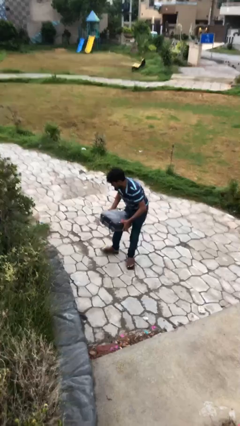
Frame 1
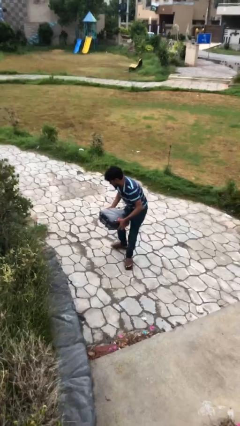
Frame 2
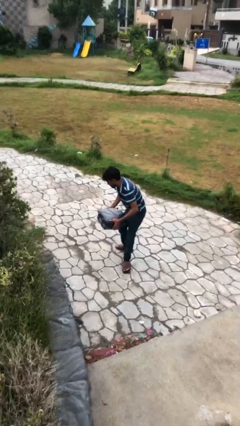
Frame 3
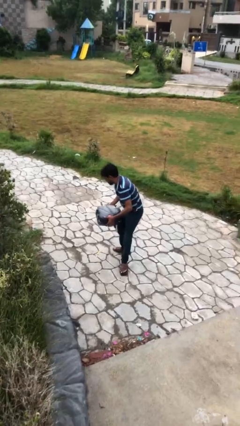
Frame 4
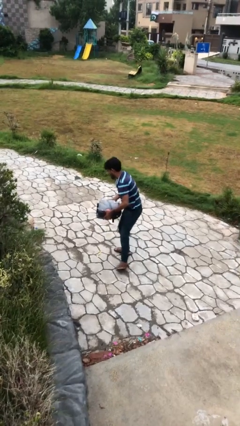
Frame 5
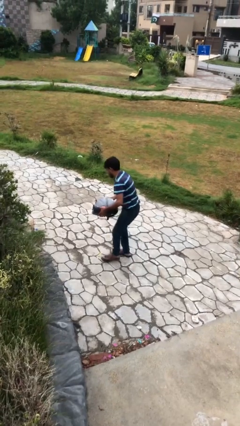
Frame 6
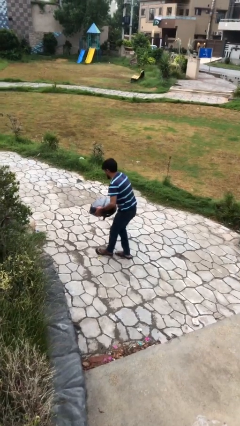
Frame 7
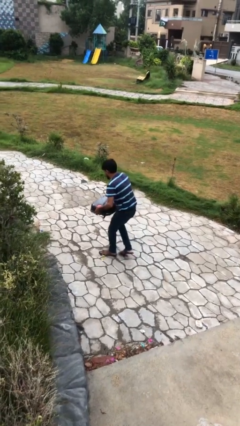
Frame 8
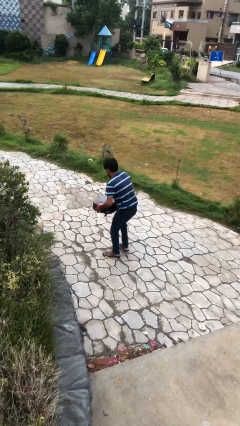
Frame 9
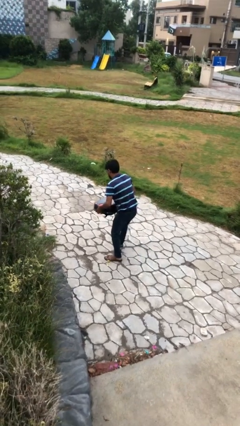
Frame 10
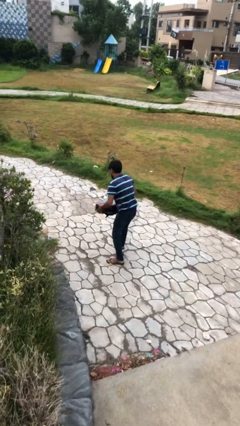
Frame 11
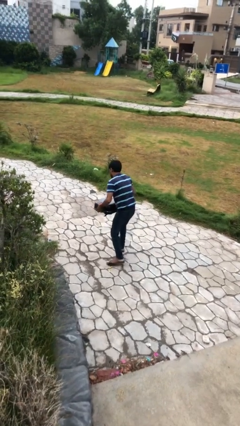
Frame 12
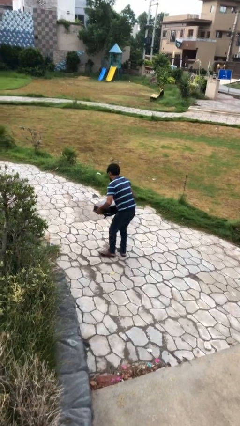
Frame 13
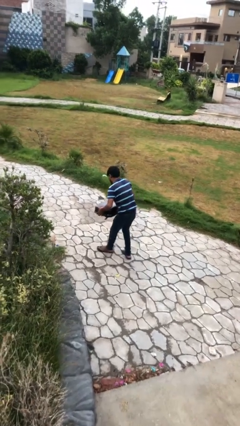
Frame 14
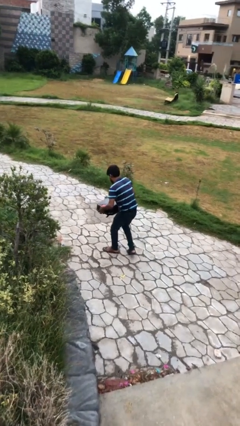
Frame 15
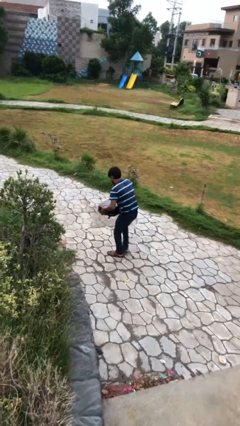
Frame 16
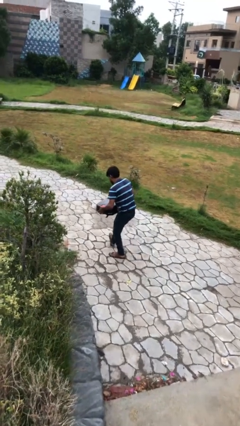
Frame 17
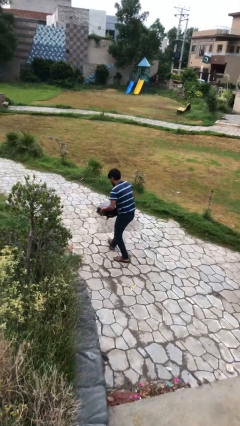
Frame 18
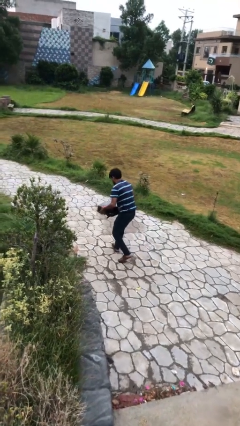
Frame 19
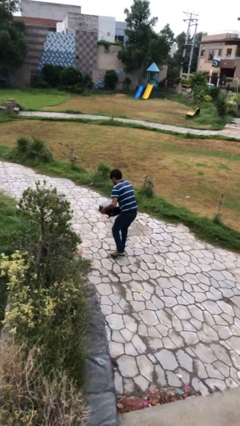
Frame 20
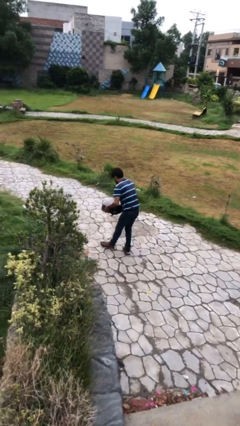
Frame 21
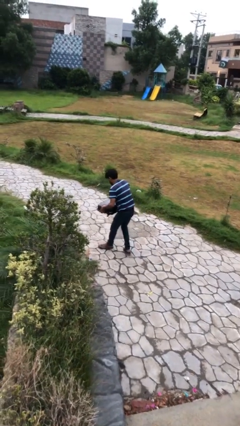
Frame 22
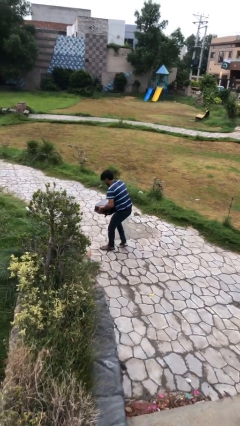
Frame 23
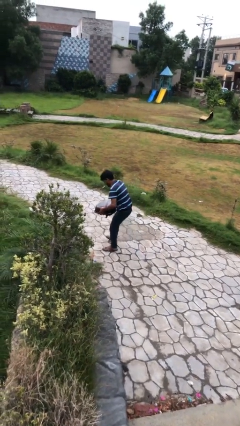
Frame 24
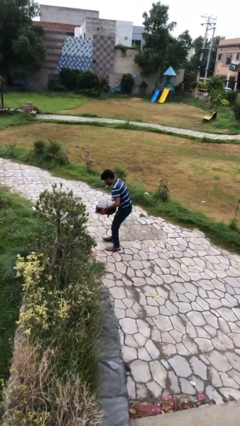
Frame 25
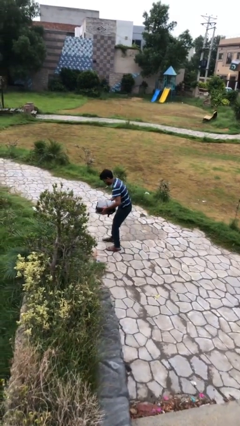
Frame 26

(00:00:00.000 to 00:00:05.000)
person carries heavy object

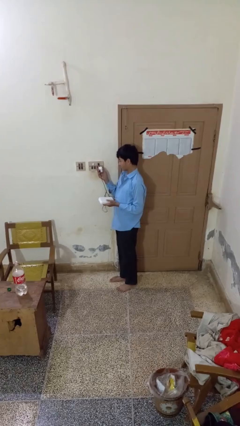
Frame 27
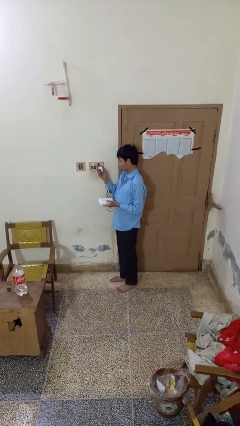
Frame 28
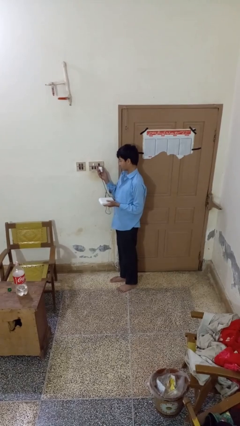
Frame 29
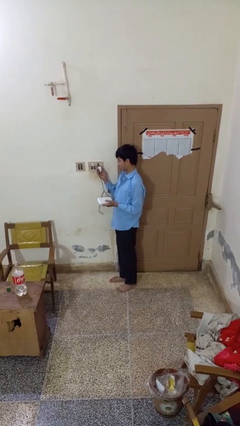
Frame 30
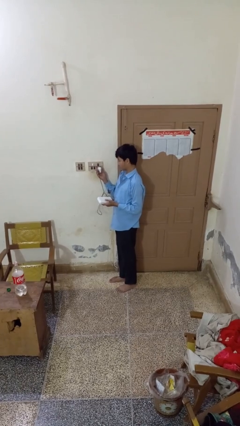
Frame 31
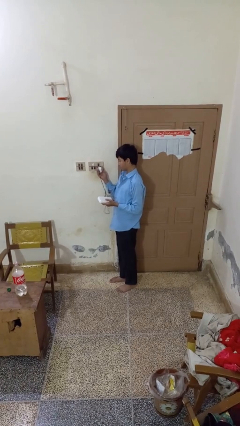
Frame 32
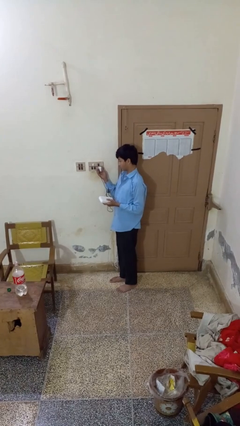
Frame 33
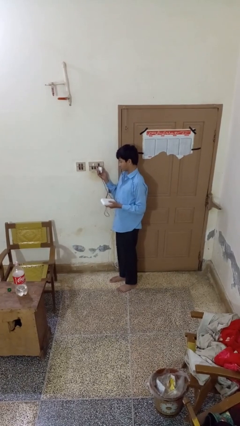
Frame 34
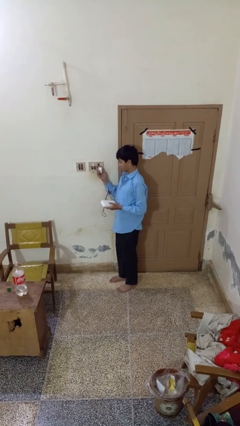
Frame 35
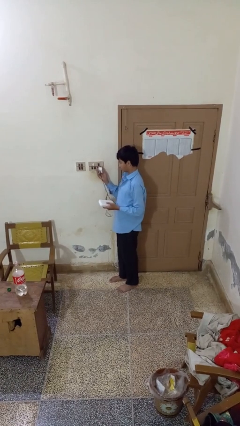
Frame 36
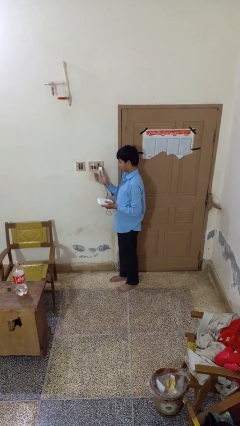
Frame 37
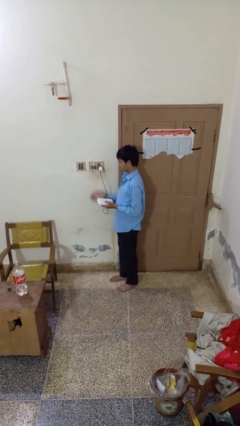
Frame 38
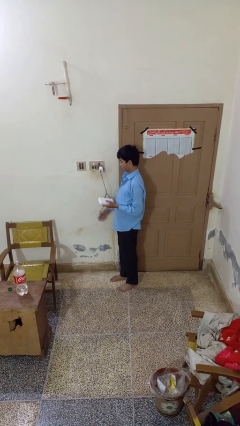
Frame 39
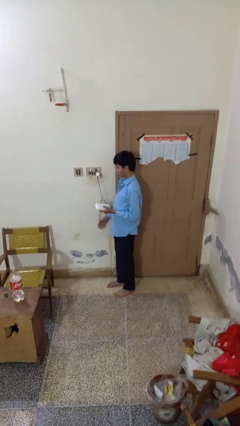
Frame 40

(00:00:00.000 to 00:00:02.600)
person plugs into electrical socket

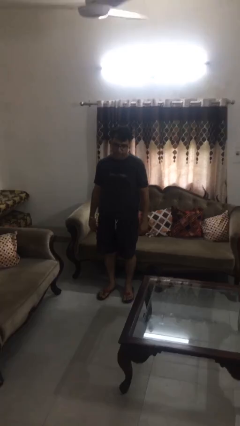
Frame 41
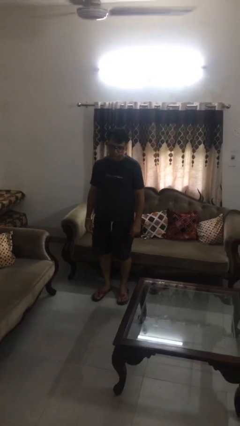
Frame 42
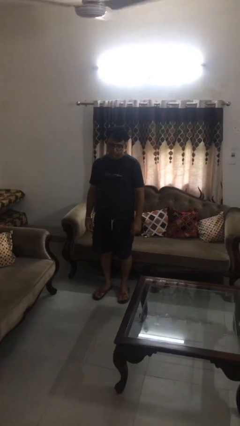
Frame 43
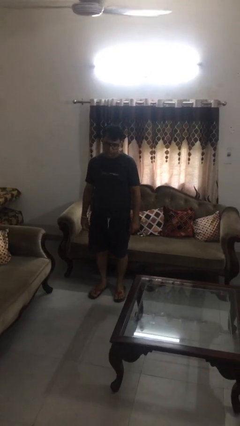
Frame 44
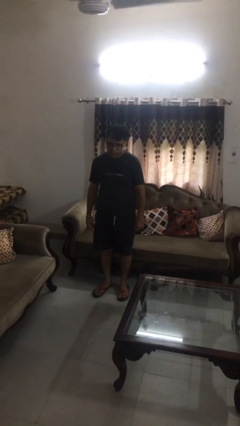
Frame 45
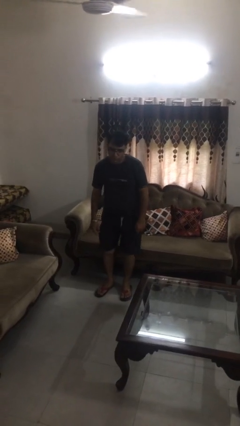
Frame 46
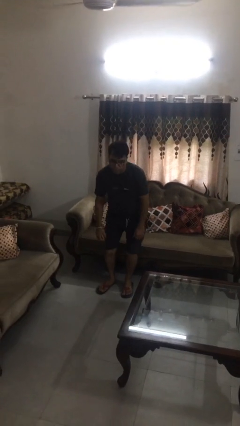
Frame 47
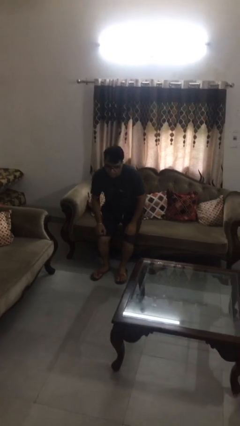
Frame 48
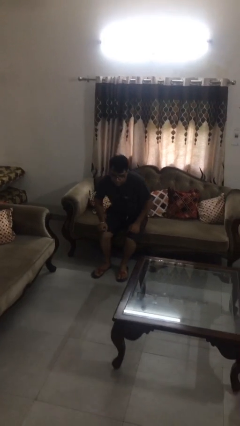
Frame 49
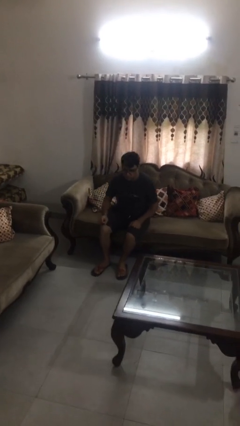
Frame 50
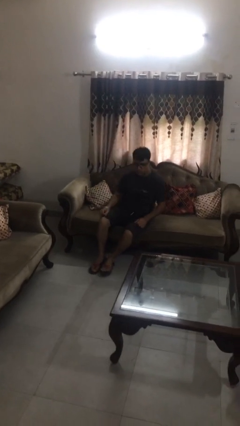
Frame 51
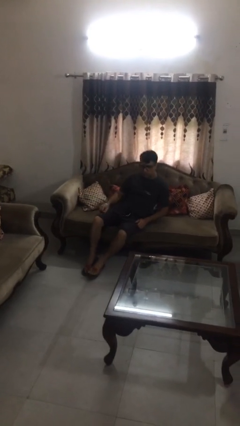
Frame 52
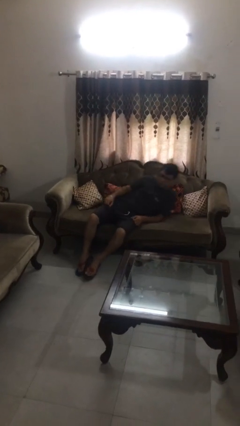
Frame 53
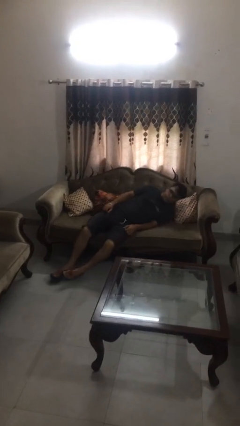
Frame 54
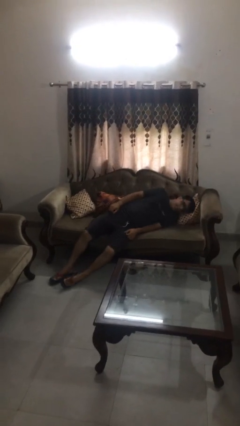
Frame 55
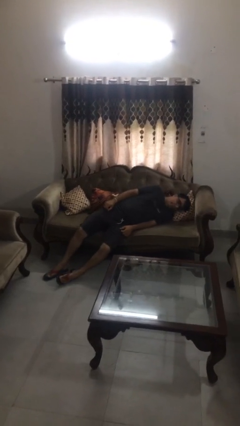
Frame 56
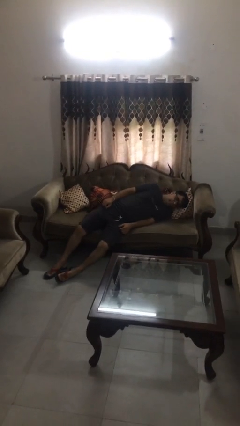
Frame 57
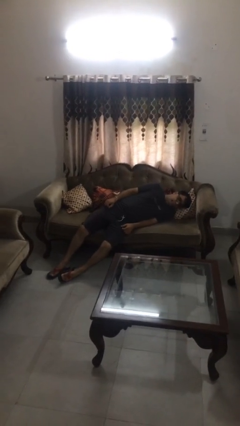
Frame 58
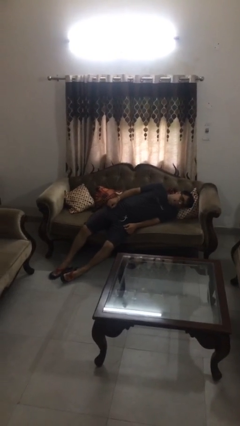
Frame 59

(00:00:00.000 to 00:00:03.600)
person lies down on couch

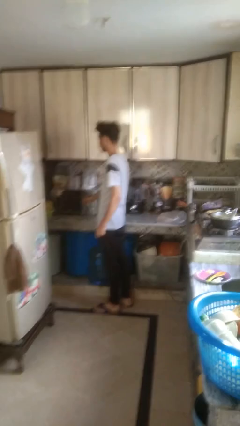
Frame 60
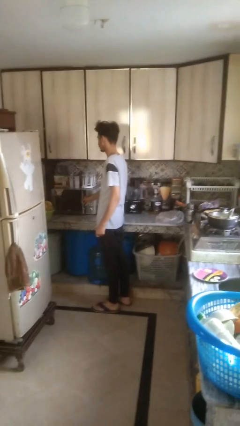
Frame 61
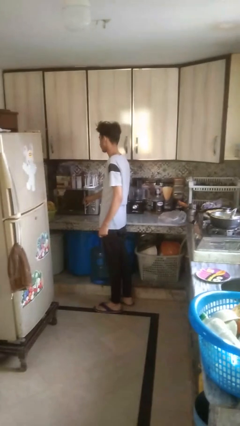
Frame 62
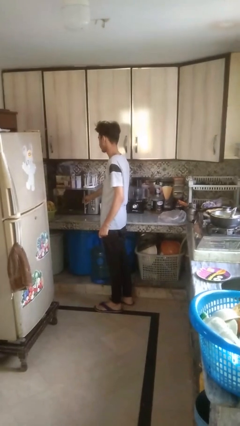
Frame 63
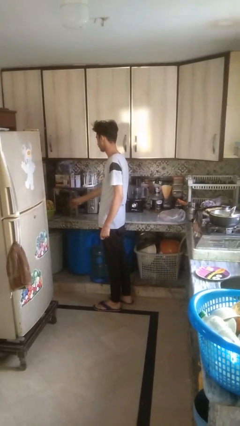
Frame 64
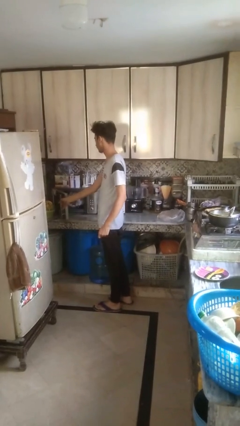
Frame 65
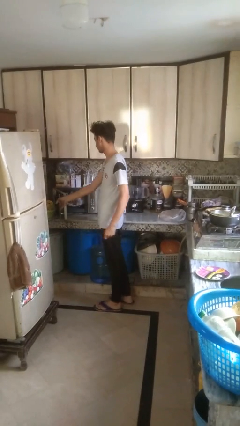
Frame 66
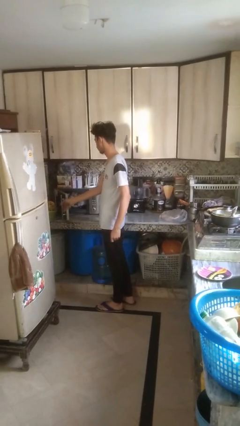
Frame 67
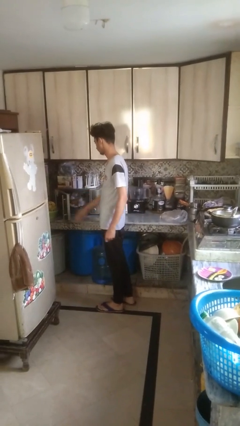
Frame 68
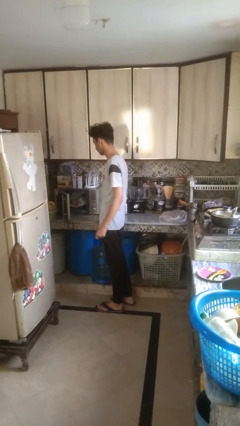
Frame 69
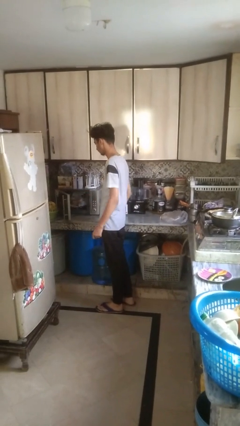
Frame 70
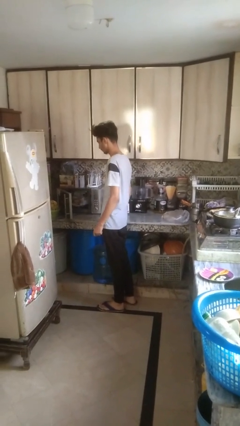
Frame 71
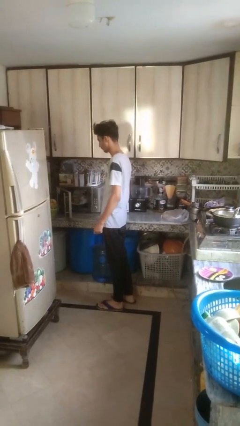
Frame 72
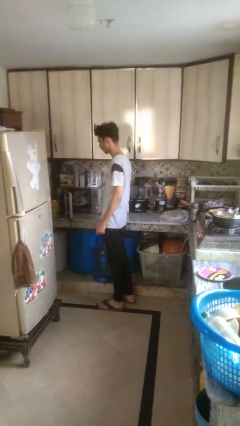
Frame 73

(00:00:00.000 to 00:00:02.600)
person opens oven door

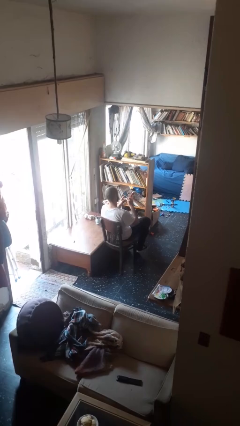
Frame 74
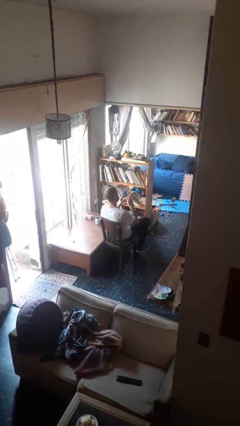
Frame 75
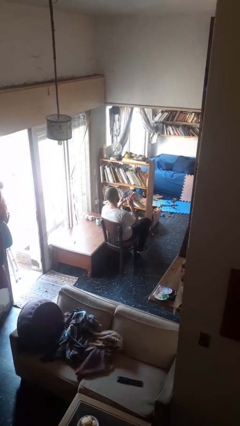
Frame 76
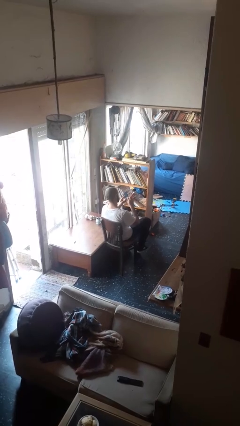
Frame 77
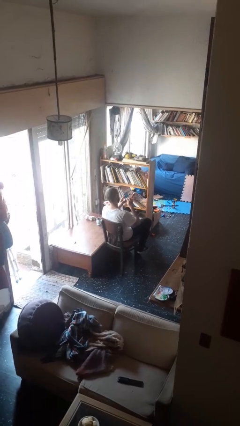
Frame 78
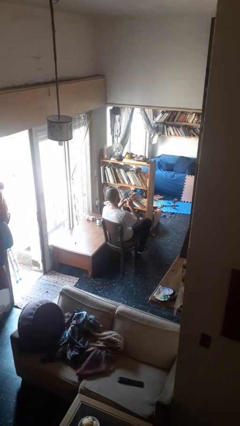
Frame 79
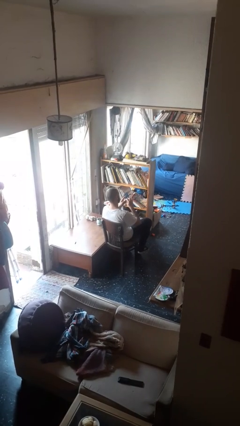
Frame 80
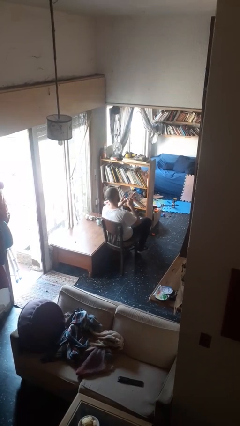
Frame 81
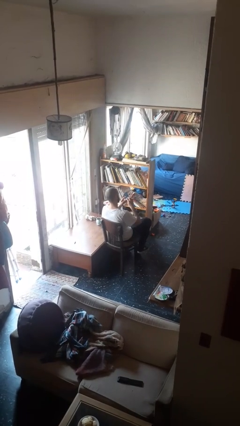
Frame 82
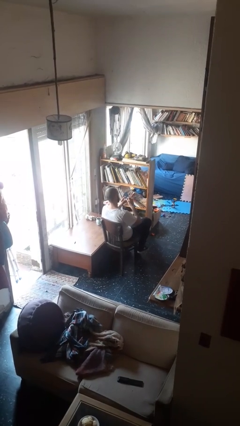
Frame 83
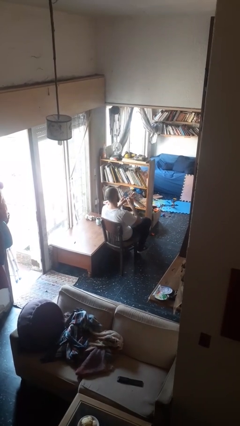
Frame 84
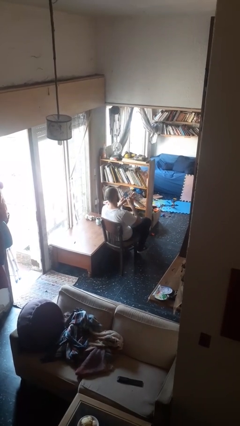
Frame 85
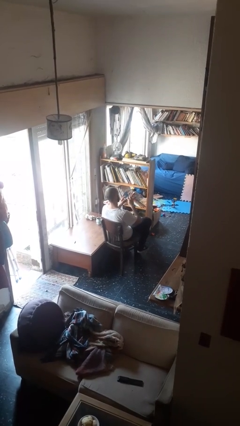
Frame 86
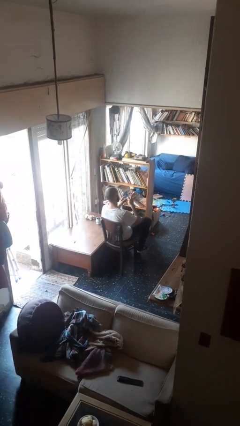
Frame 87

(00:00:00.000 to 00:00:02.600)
person files fingernails

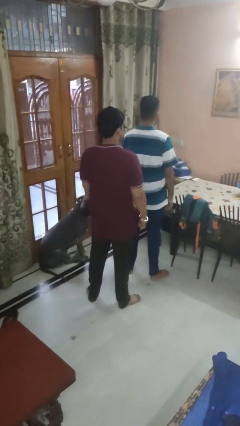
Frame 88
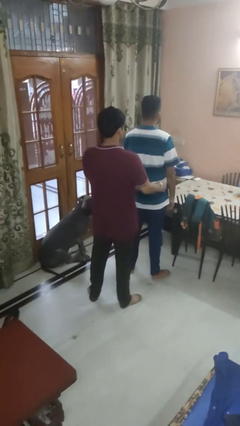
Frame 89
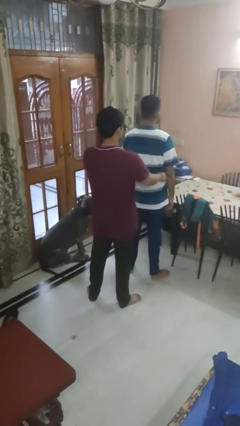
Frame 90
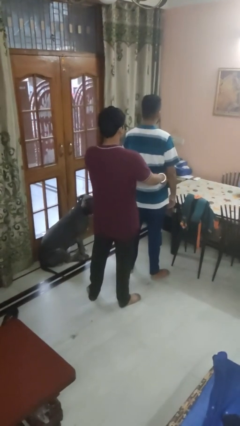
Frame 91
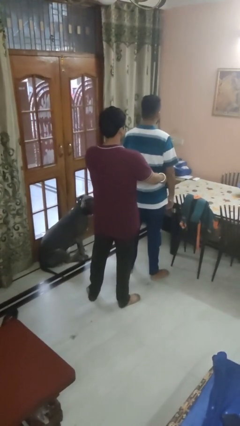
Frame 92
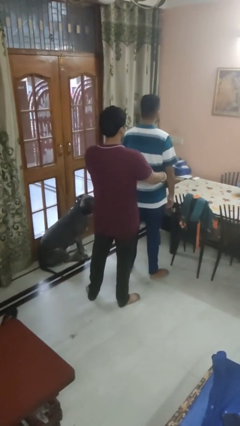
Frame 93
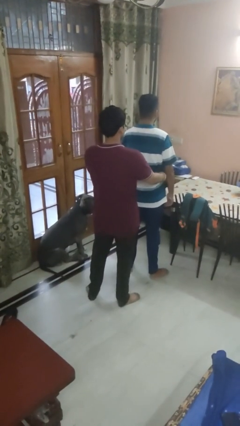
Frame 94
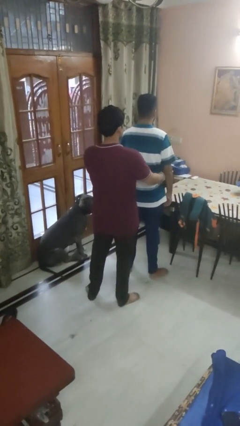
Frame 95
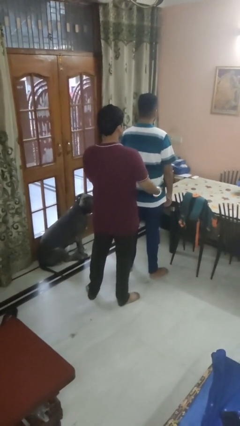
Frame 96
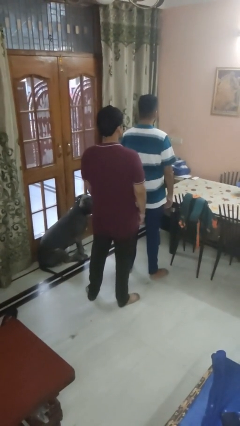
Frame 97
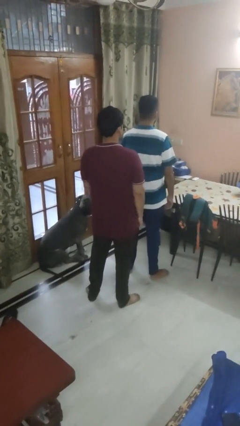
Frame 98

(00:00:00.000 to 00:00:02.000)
person tickles person
